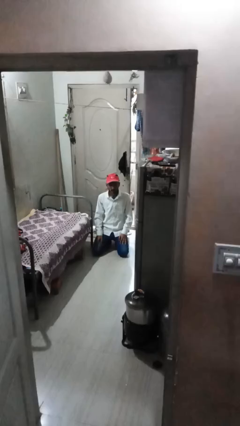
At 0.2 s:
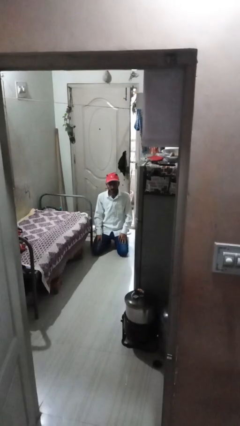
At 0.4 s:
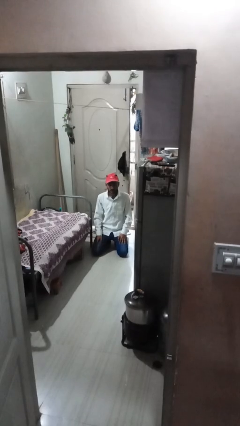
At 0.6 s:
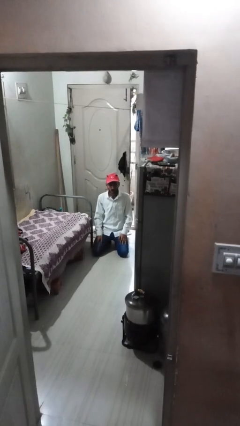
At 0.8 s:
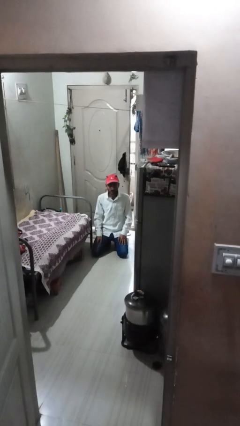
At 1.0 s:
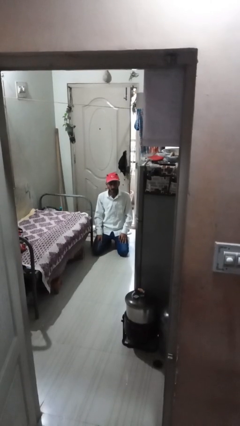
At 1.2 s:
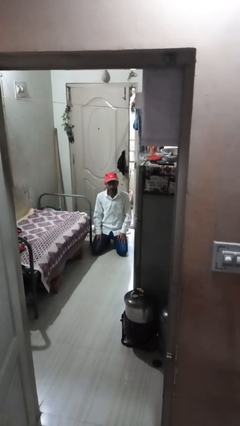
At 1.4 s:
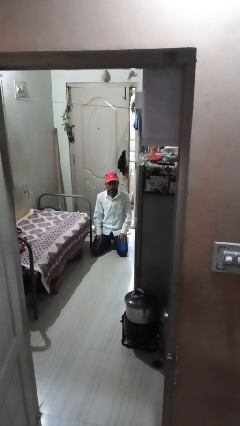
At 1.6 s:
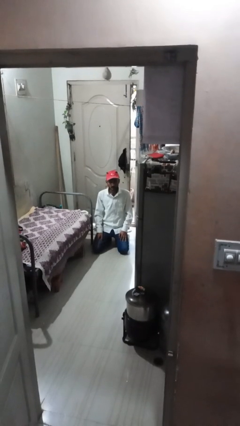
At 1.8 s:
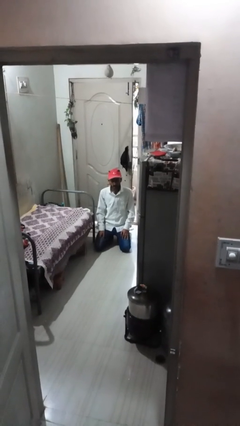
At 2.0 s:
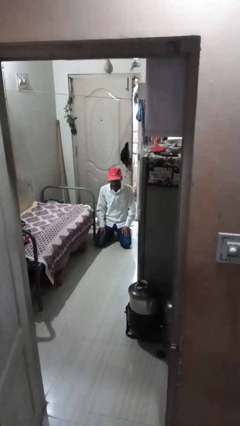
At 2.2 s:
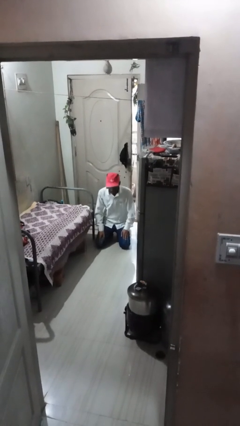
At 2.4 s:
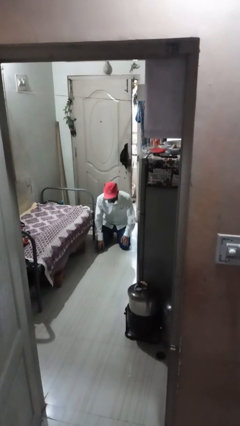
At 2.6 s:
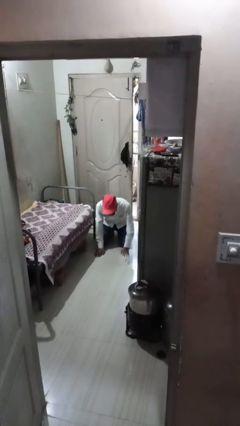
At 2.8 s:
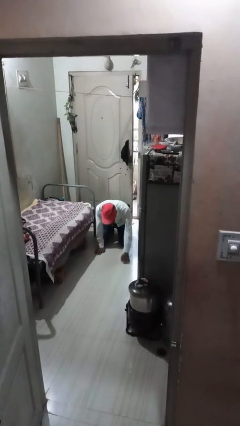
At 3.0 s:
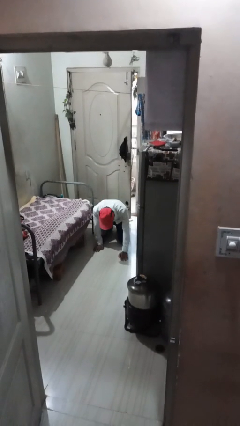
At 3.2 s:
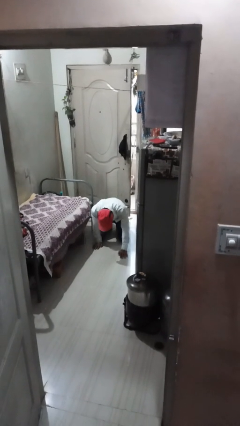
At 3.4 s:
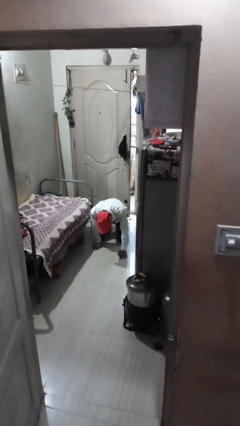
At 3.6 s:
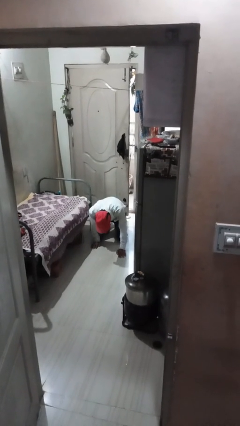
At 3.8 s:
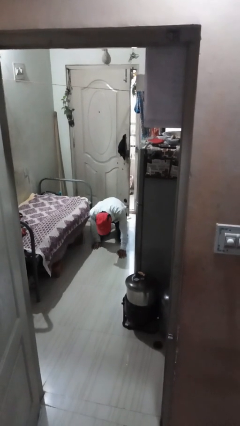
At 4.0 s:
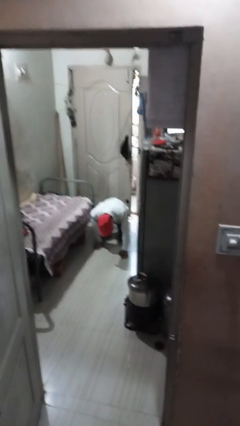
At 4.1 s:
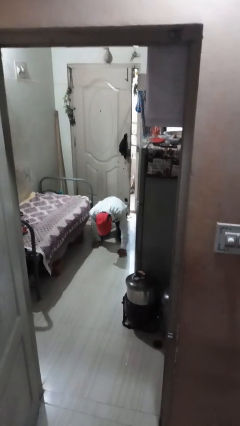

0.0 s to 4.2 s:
person crawls

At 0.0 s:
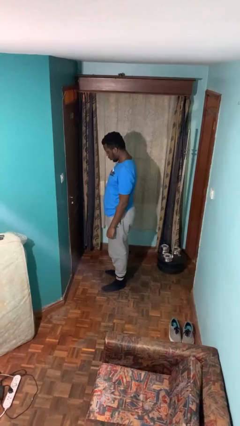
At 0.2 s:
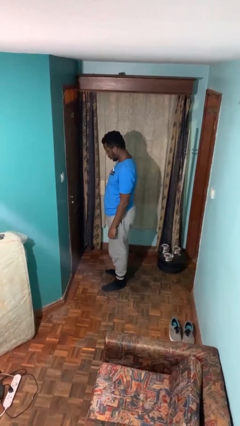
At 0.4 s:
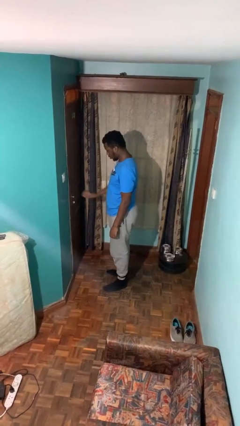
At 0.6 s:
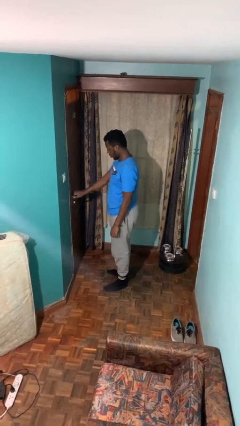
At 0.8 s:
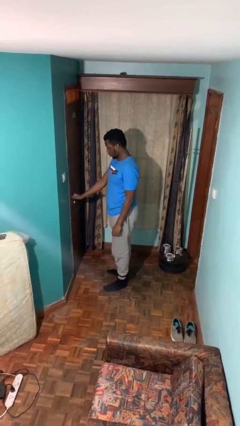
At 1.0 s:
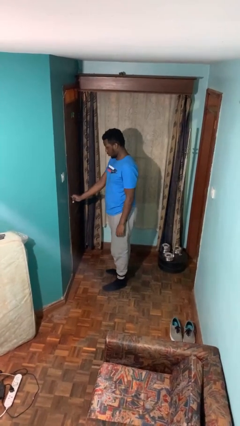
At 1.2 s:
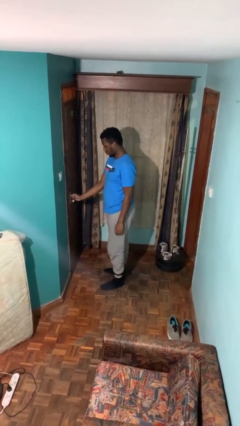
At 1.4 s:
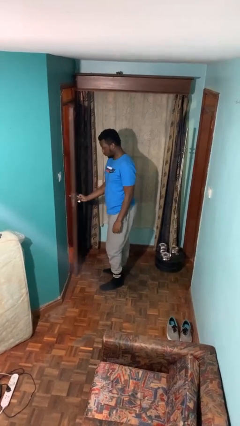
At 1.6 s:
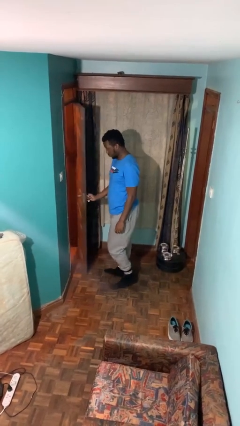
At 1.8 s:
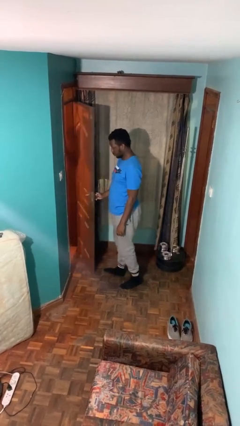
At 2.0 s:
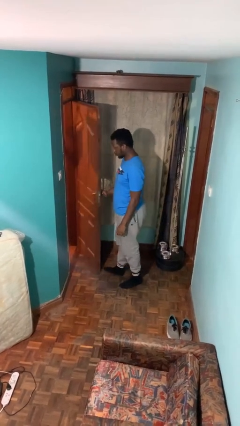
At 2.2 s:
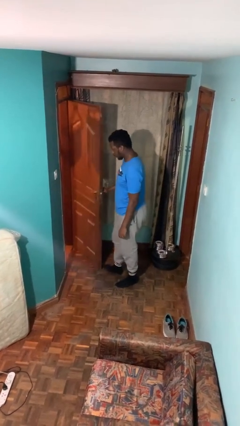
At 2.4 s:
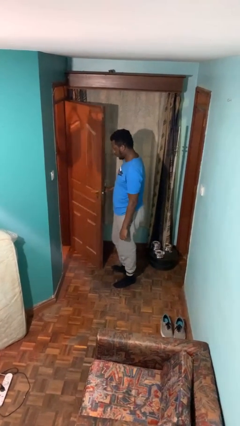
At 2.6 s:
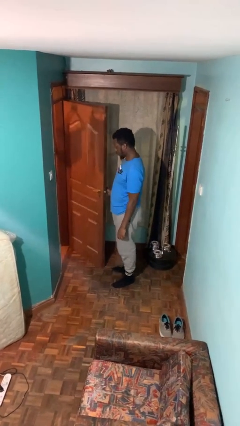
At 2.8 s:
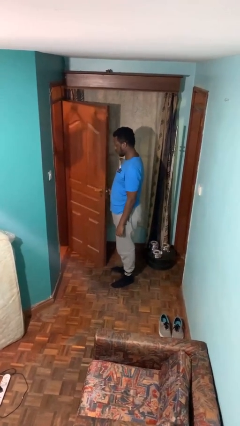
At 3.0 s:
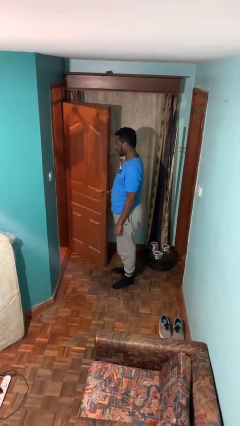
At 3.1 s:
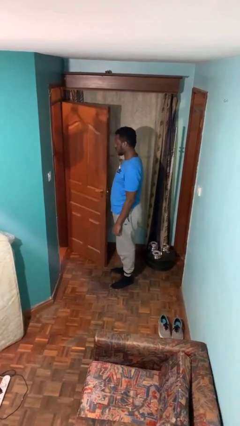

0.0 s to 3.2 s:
person opens facility door

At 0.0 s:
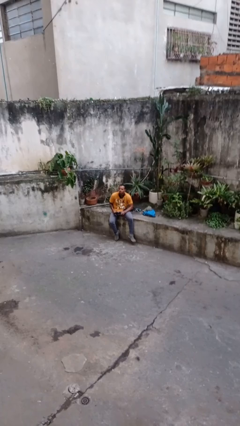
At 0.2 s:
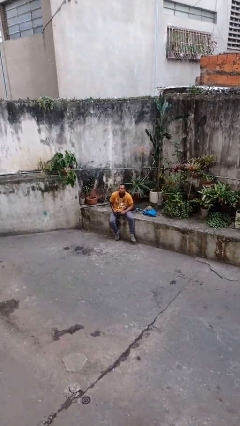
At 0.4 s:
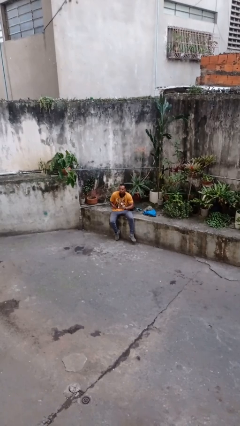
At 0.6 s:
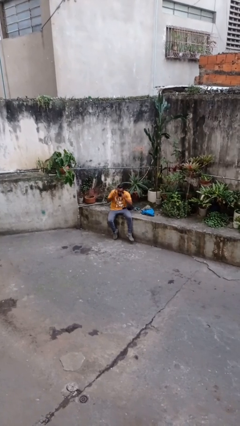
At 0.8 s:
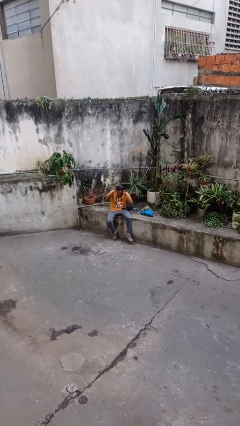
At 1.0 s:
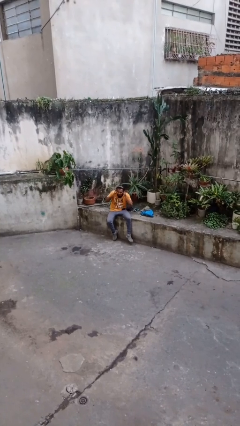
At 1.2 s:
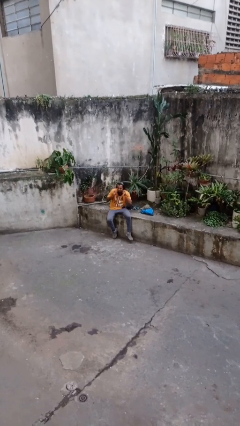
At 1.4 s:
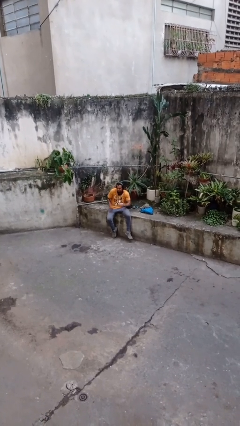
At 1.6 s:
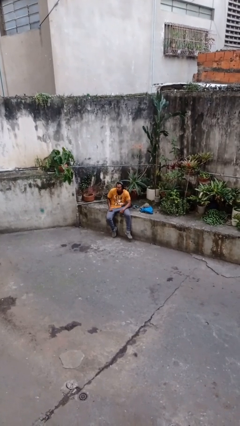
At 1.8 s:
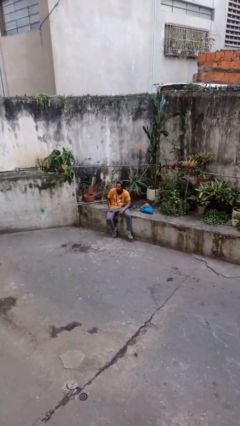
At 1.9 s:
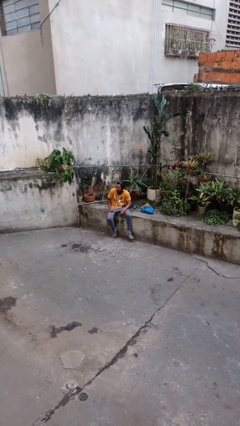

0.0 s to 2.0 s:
person puts on headphones

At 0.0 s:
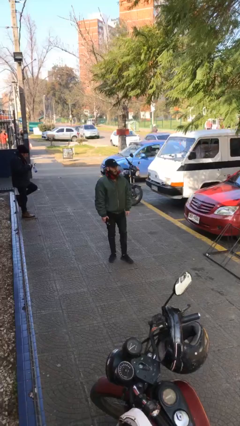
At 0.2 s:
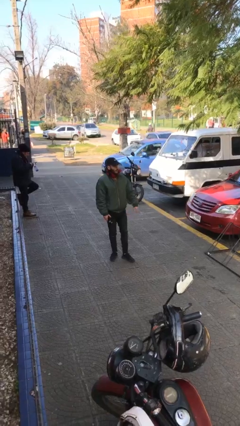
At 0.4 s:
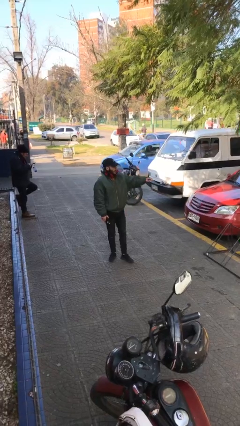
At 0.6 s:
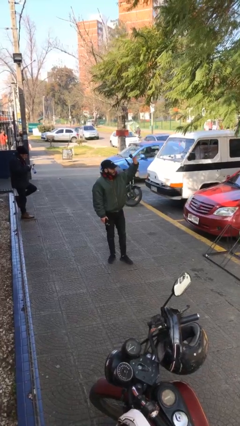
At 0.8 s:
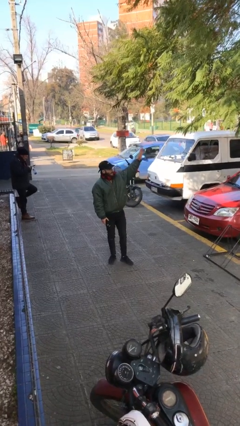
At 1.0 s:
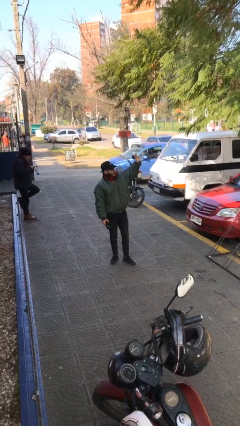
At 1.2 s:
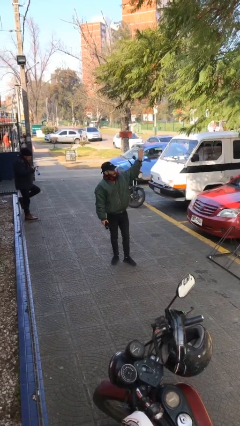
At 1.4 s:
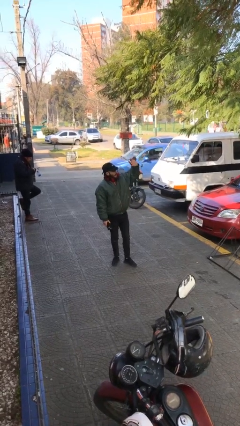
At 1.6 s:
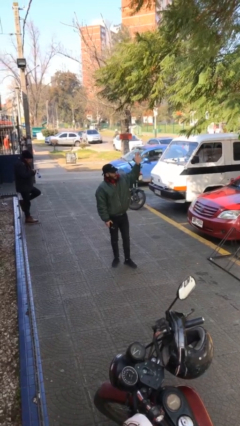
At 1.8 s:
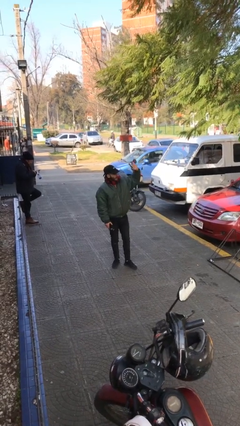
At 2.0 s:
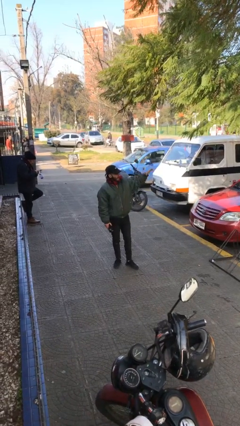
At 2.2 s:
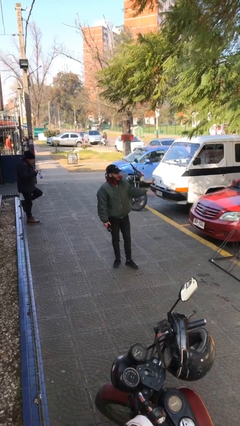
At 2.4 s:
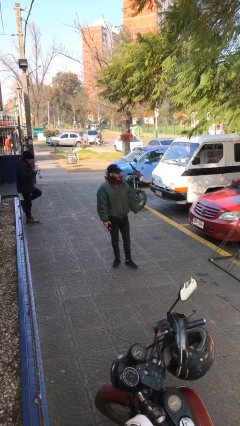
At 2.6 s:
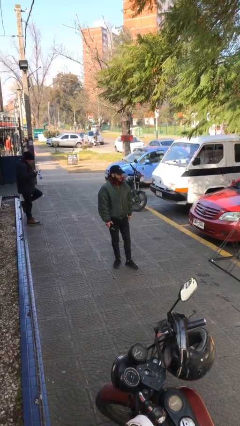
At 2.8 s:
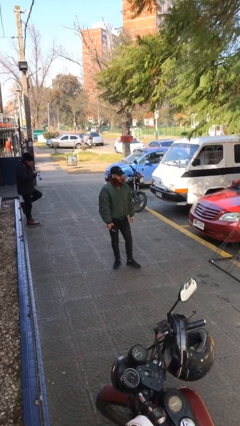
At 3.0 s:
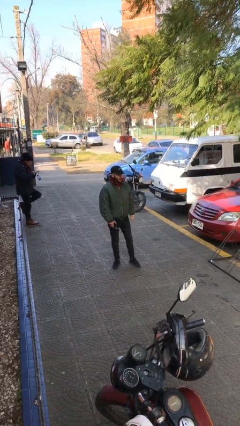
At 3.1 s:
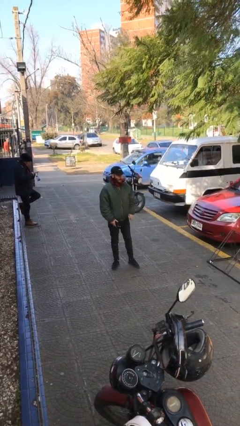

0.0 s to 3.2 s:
person waves at person

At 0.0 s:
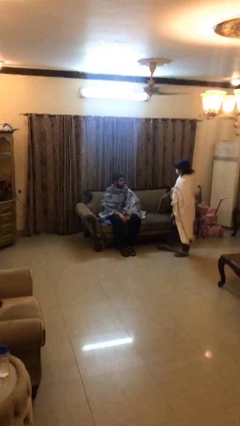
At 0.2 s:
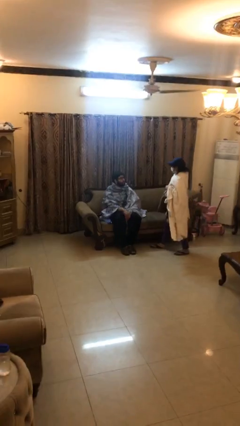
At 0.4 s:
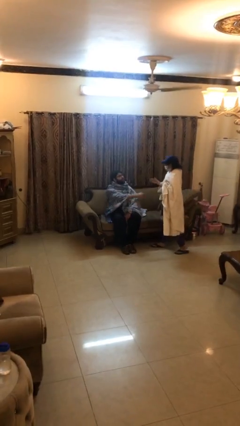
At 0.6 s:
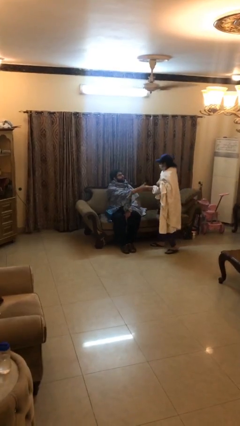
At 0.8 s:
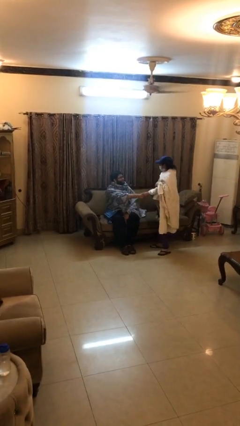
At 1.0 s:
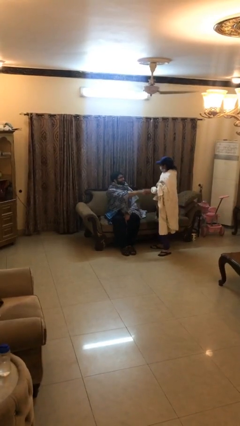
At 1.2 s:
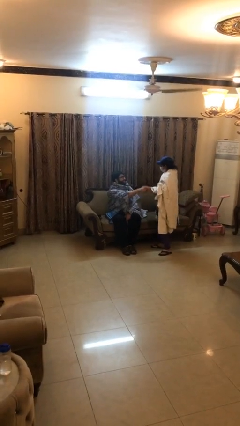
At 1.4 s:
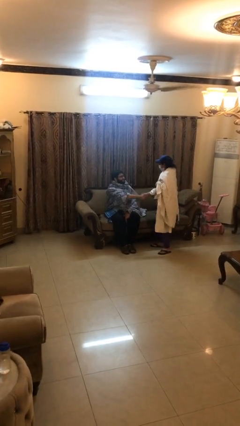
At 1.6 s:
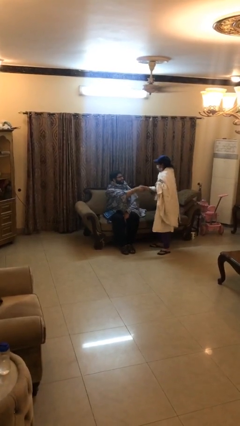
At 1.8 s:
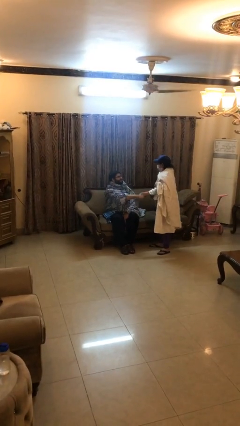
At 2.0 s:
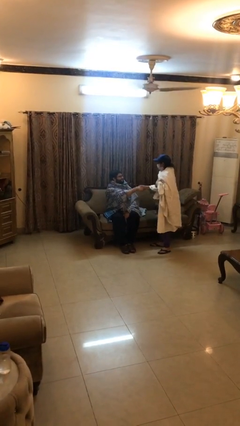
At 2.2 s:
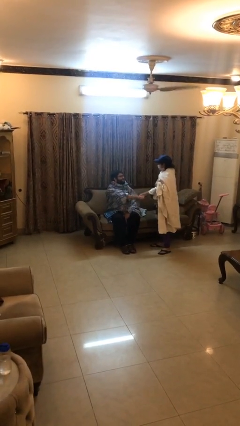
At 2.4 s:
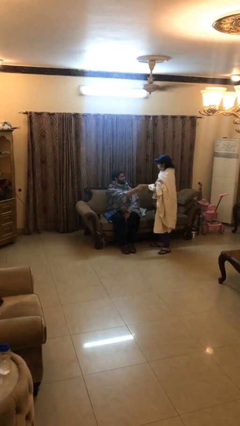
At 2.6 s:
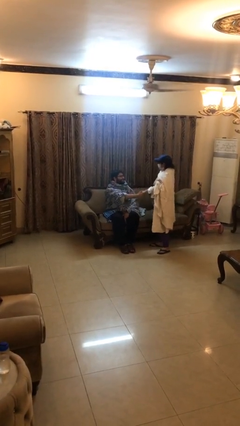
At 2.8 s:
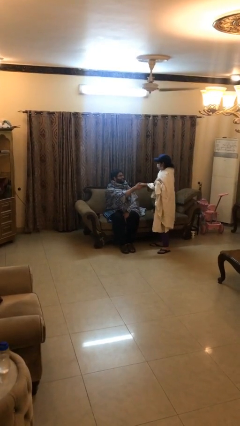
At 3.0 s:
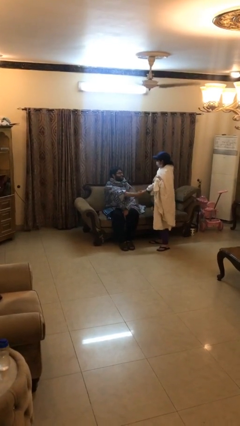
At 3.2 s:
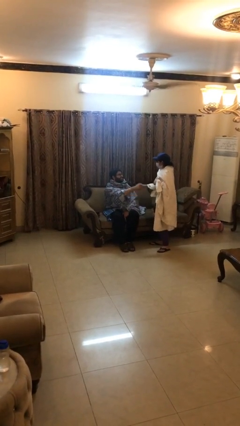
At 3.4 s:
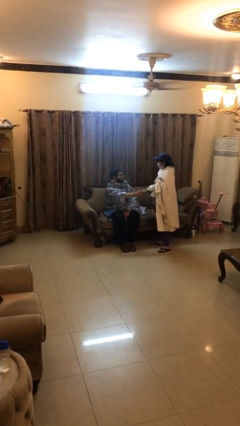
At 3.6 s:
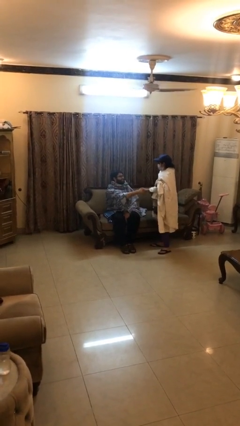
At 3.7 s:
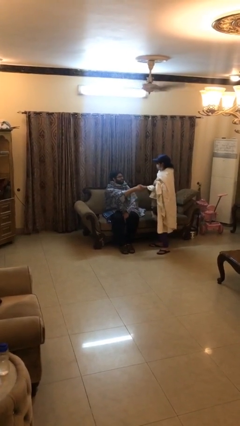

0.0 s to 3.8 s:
person shakes hand

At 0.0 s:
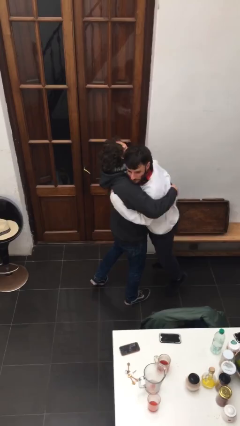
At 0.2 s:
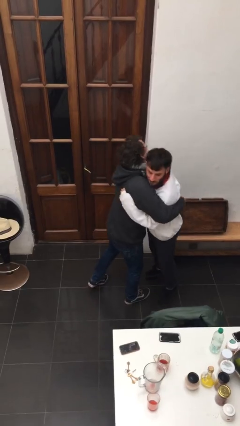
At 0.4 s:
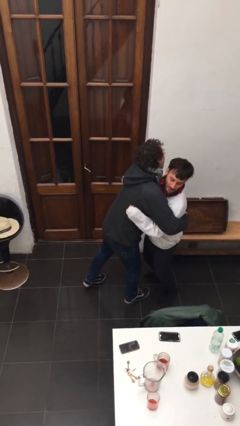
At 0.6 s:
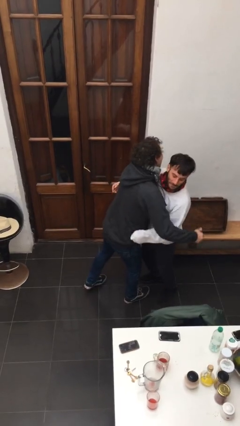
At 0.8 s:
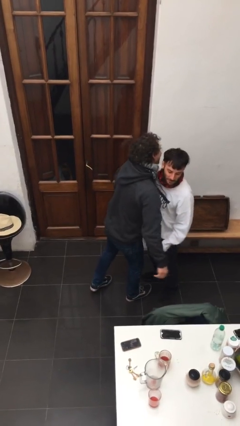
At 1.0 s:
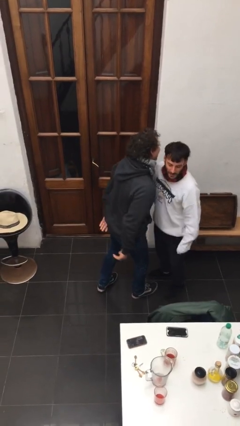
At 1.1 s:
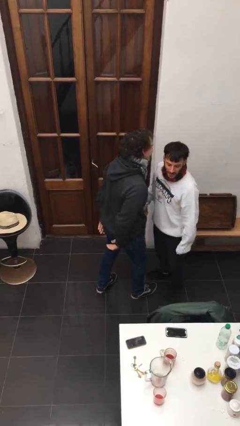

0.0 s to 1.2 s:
person puts down person
